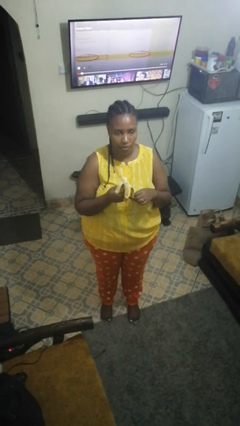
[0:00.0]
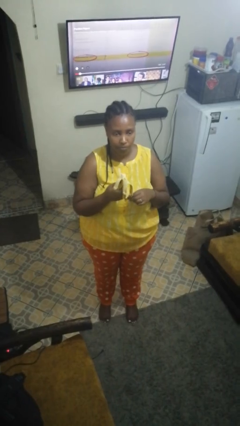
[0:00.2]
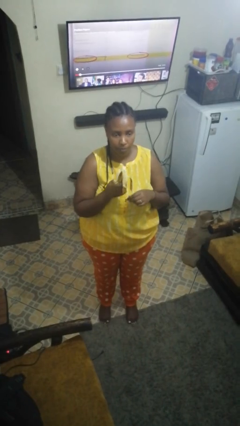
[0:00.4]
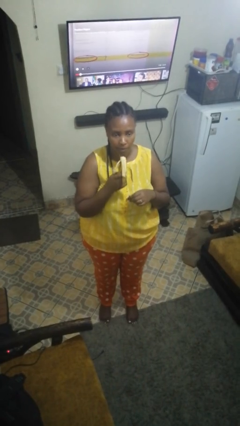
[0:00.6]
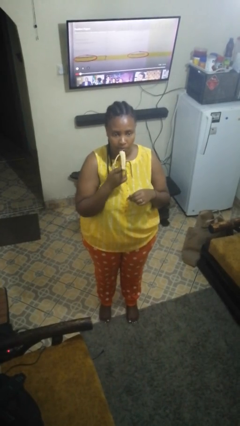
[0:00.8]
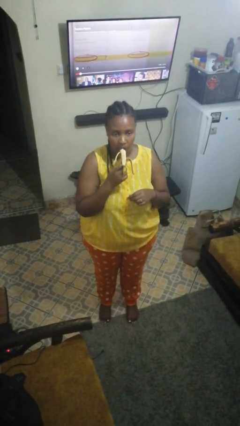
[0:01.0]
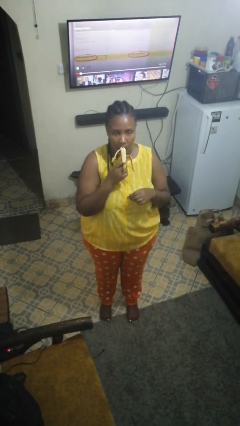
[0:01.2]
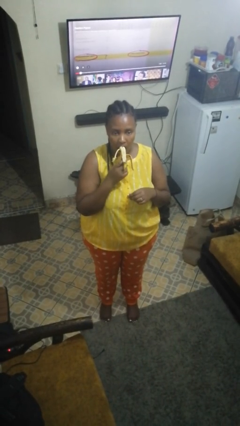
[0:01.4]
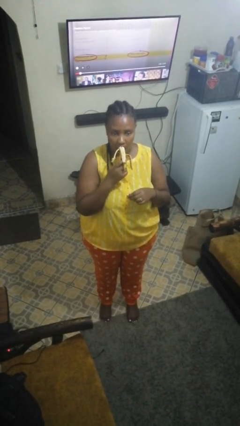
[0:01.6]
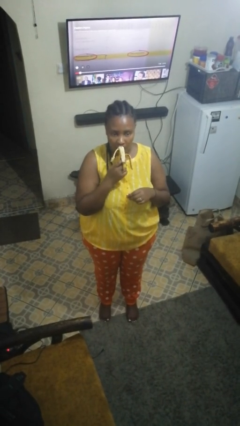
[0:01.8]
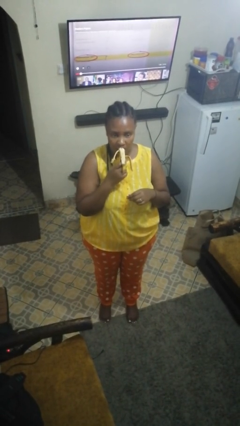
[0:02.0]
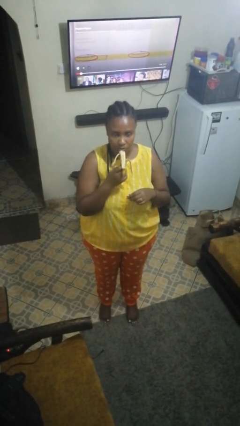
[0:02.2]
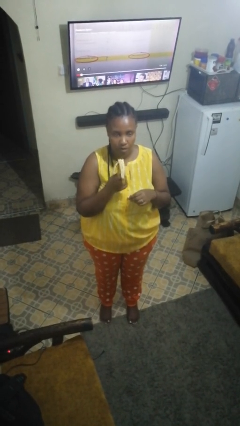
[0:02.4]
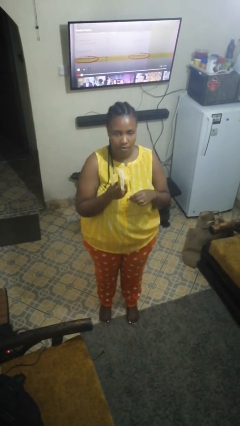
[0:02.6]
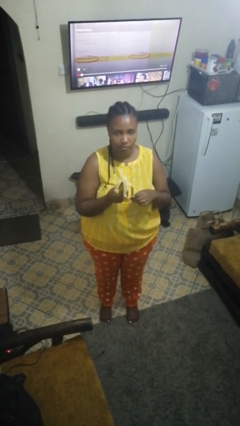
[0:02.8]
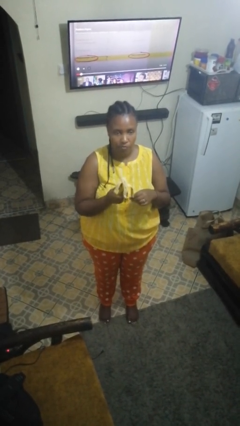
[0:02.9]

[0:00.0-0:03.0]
person eats banana

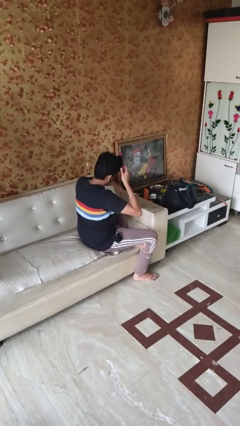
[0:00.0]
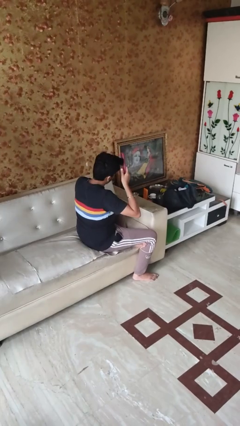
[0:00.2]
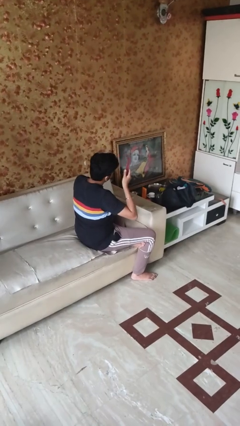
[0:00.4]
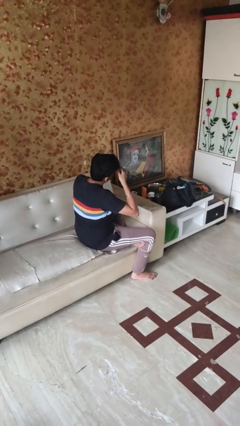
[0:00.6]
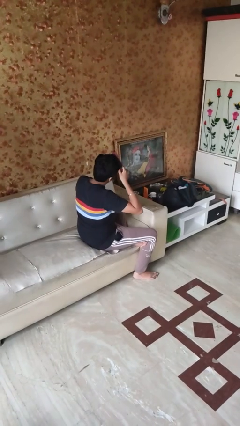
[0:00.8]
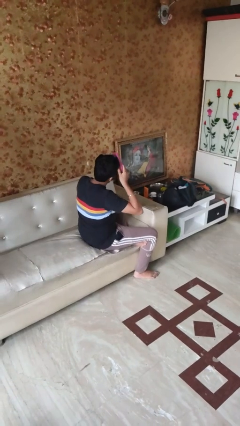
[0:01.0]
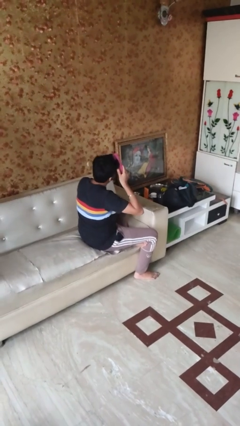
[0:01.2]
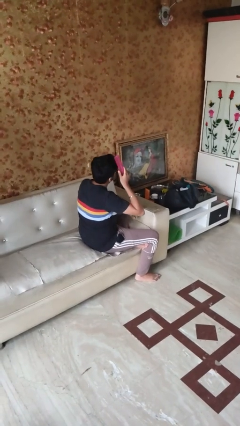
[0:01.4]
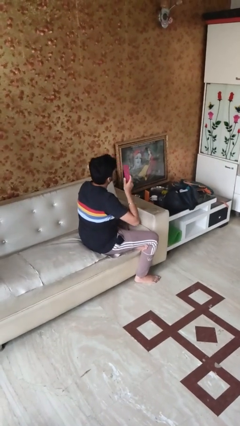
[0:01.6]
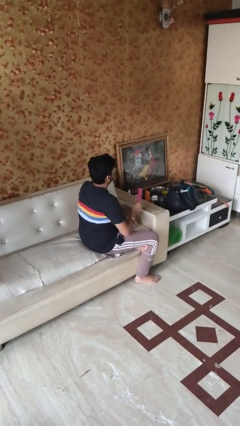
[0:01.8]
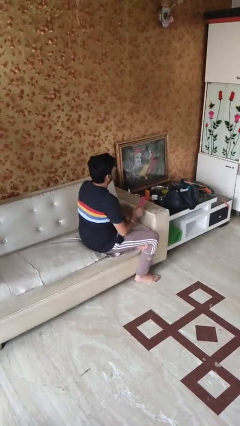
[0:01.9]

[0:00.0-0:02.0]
person brushes hair

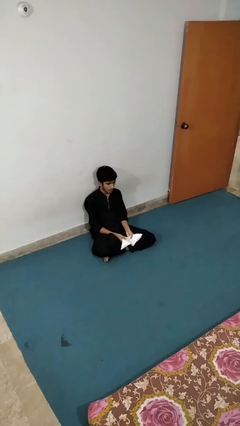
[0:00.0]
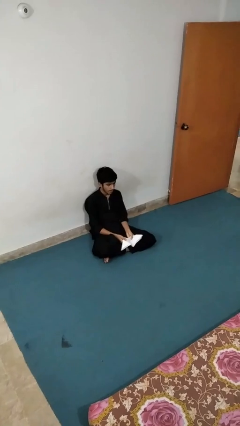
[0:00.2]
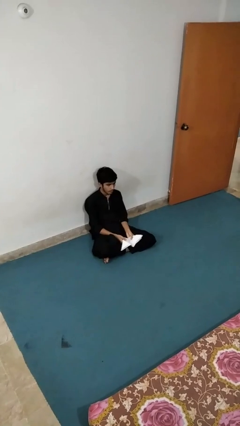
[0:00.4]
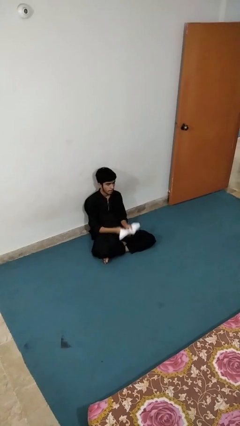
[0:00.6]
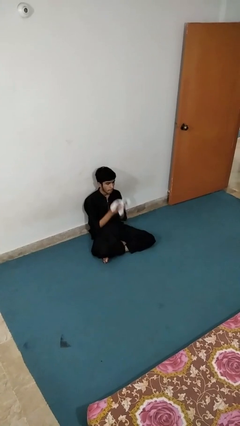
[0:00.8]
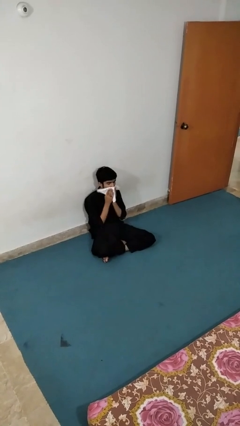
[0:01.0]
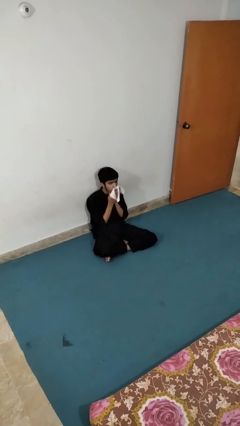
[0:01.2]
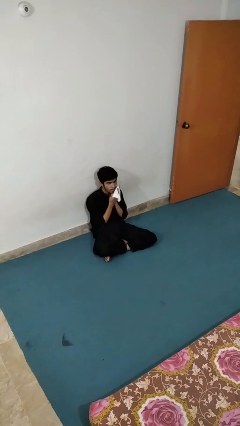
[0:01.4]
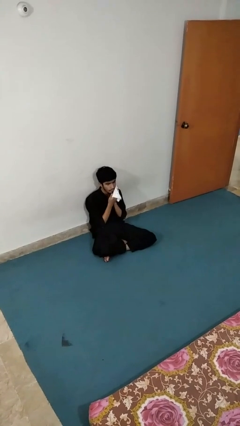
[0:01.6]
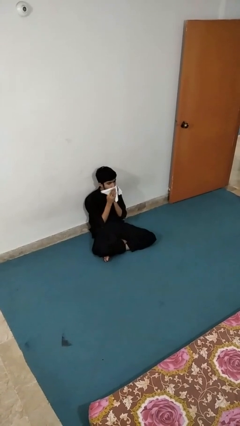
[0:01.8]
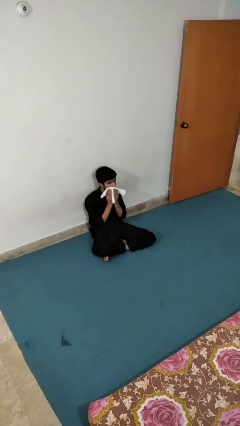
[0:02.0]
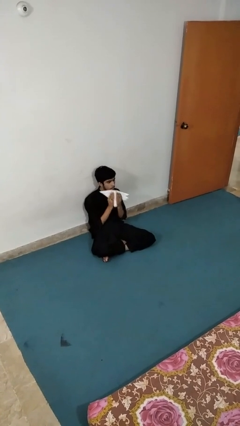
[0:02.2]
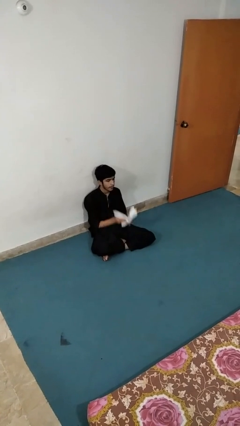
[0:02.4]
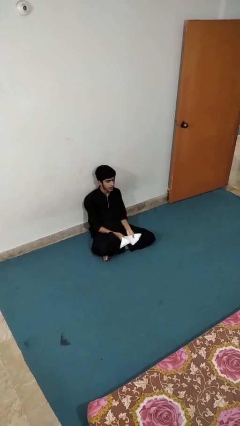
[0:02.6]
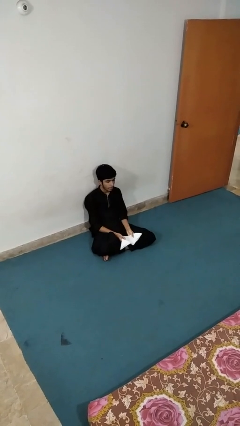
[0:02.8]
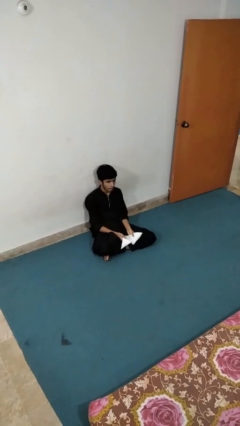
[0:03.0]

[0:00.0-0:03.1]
person wipes mouth with napkin

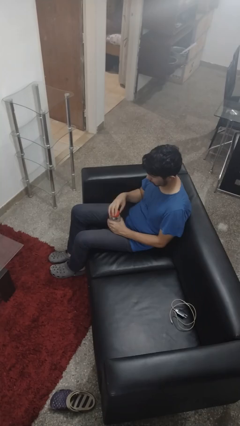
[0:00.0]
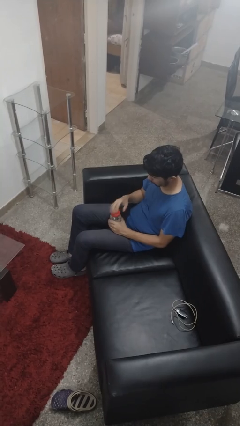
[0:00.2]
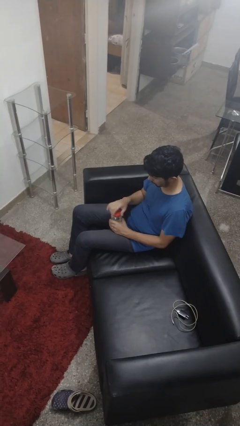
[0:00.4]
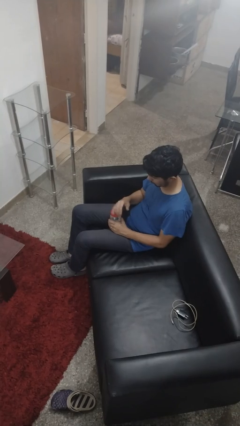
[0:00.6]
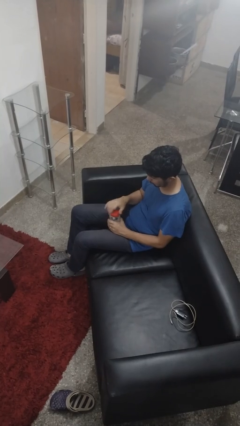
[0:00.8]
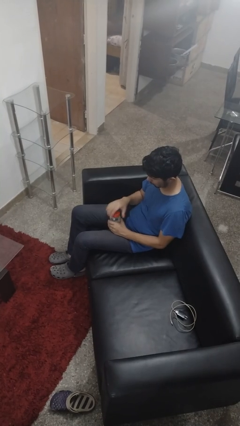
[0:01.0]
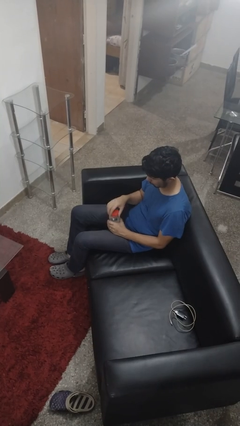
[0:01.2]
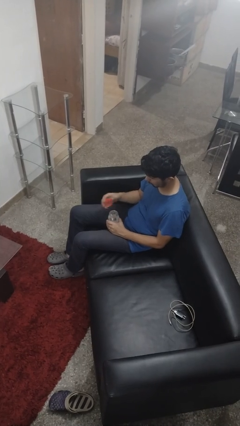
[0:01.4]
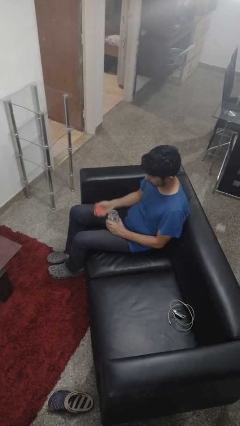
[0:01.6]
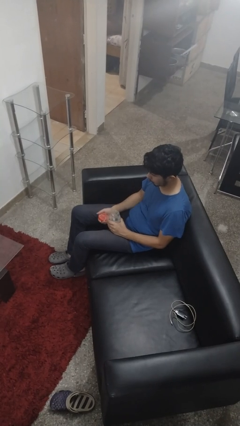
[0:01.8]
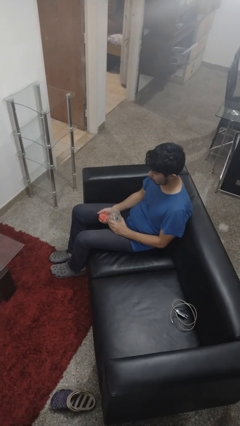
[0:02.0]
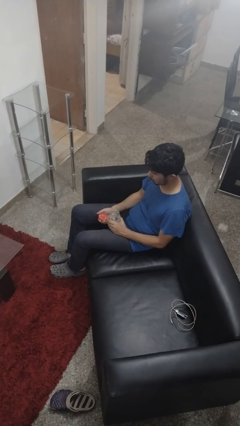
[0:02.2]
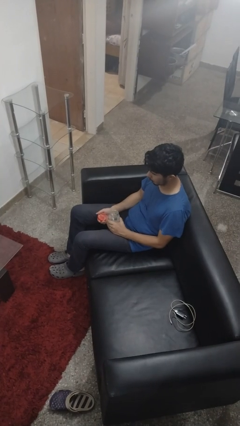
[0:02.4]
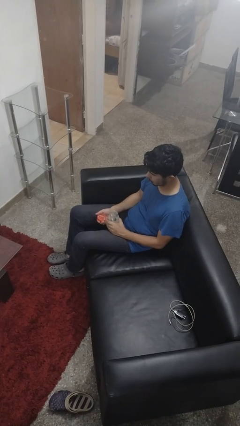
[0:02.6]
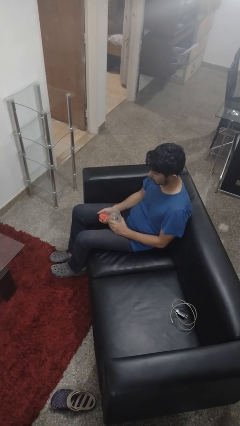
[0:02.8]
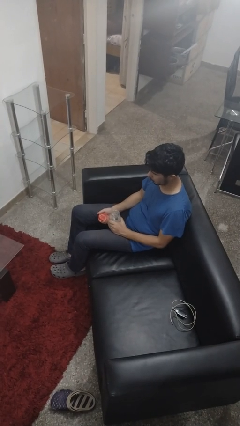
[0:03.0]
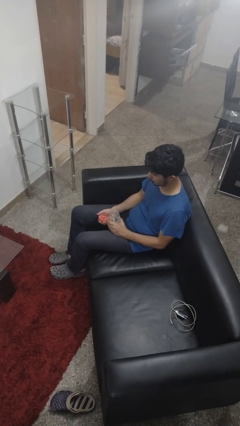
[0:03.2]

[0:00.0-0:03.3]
person opens jar

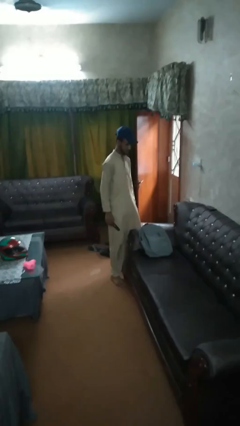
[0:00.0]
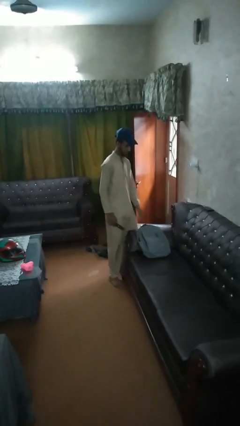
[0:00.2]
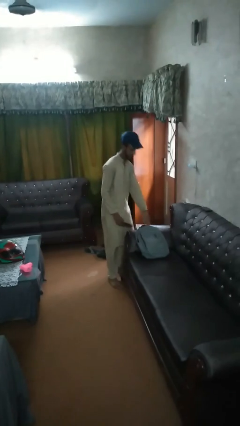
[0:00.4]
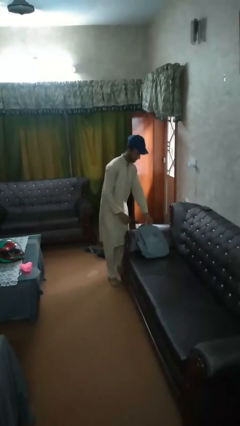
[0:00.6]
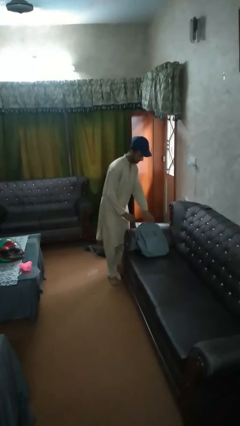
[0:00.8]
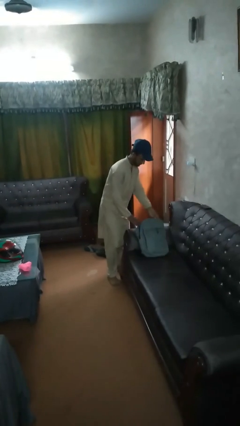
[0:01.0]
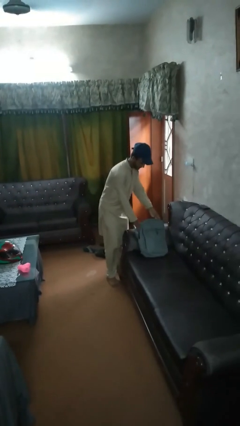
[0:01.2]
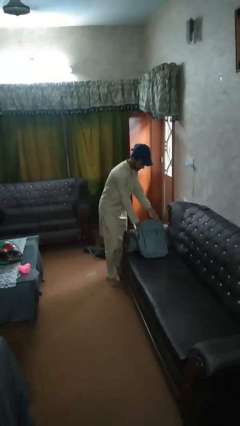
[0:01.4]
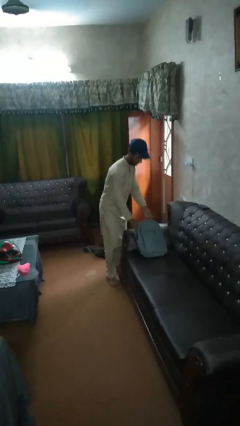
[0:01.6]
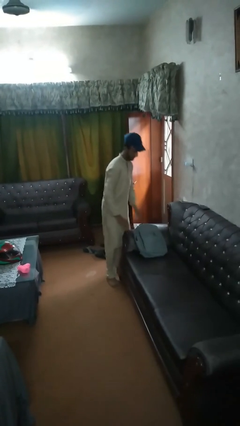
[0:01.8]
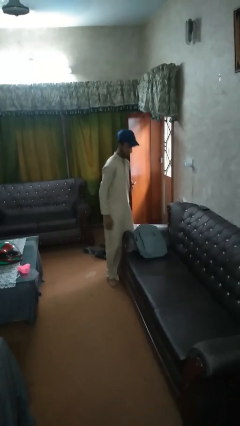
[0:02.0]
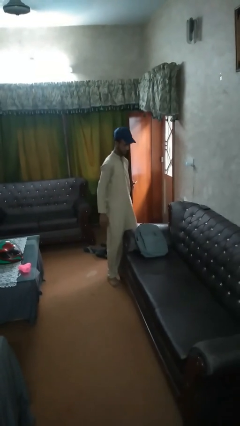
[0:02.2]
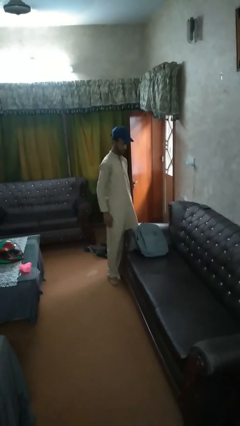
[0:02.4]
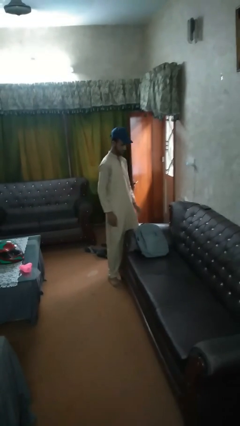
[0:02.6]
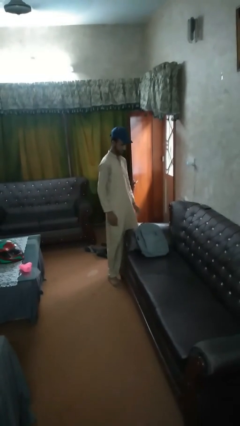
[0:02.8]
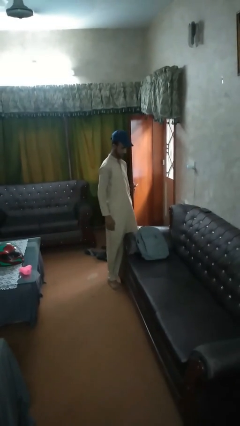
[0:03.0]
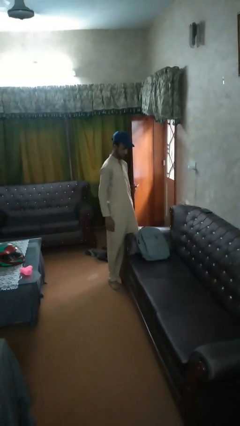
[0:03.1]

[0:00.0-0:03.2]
person puts object into bag

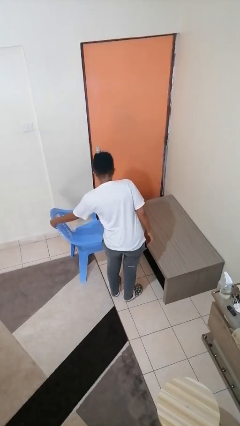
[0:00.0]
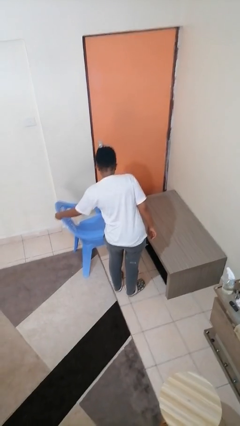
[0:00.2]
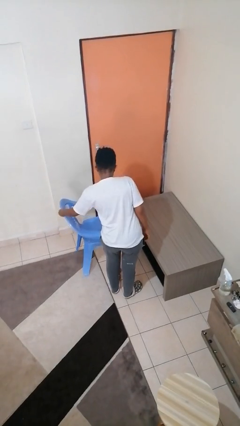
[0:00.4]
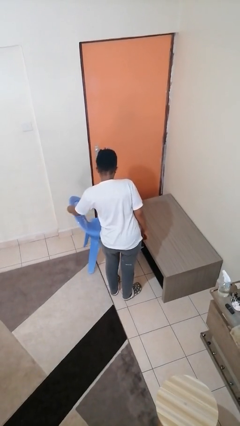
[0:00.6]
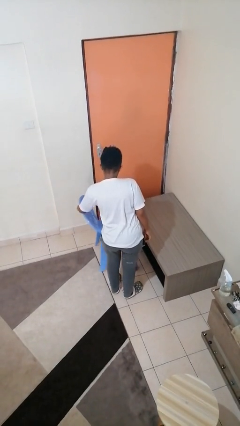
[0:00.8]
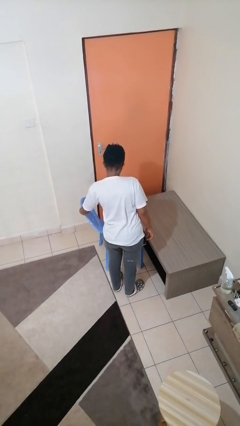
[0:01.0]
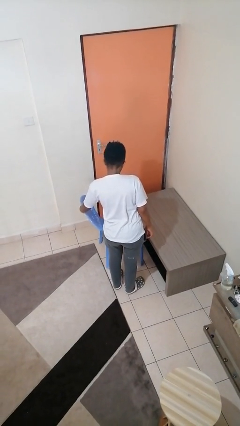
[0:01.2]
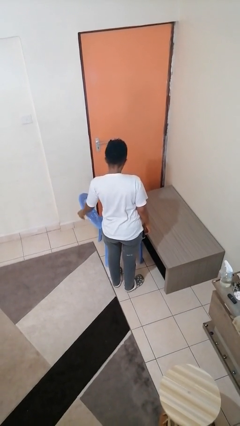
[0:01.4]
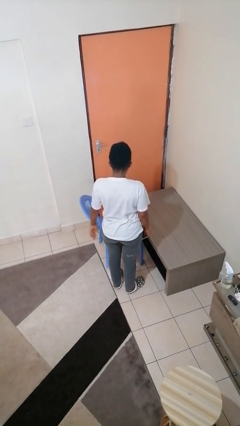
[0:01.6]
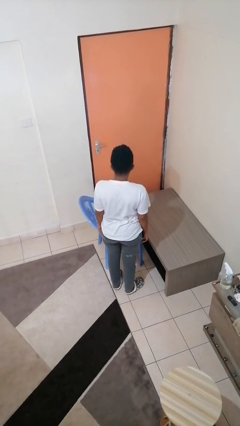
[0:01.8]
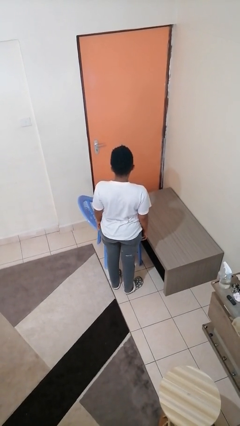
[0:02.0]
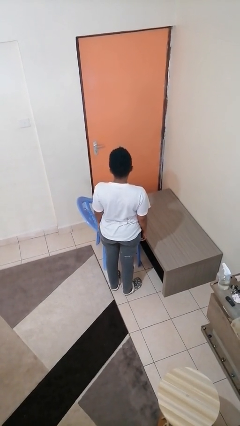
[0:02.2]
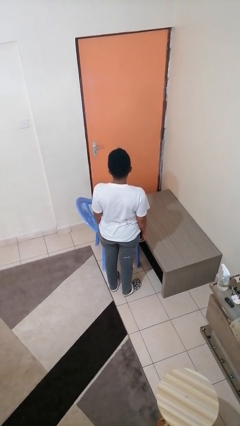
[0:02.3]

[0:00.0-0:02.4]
person pushes in chair

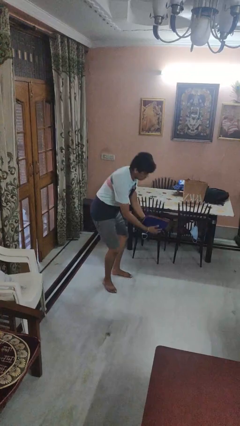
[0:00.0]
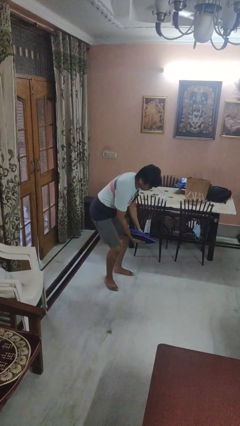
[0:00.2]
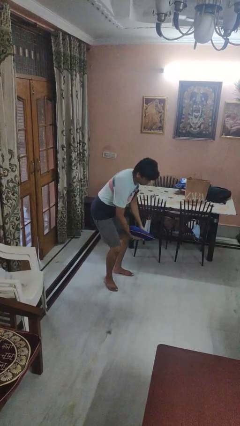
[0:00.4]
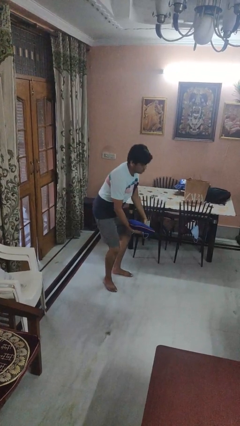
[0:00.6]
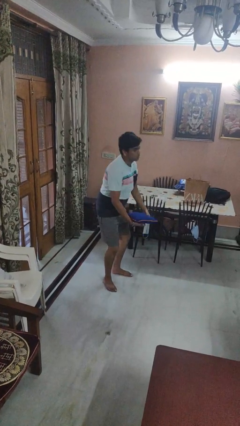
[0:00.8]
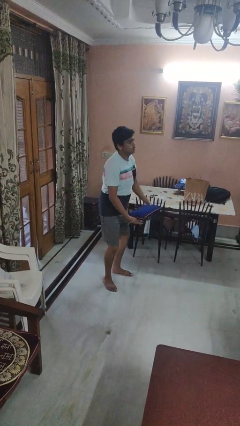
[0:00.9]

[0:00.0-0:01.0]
person catches dropped object
